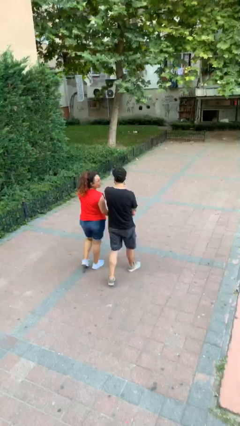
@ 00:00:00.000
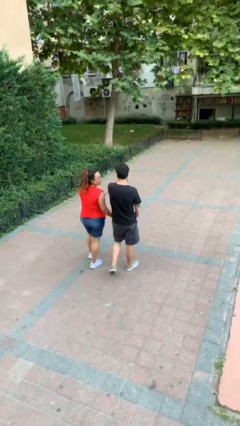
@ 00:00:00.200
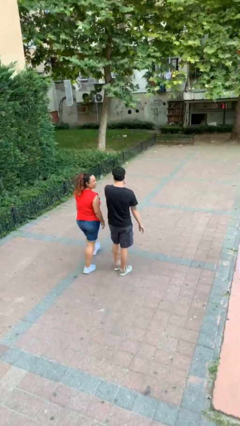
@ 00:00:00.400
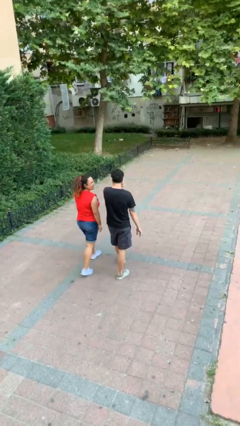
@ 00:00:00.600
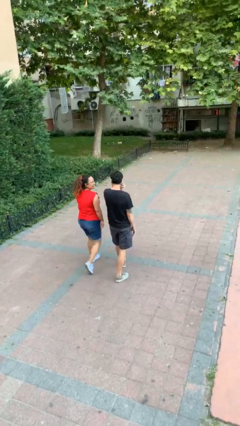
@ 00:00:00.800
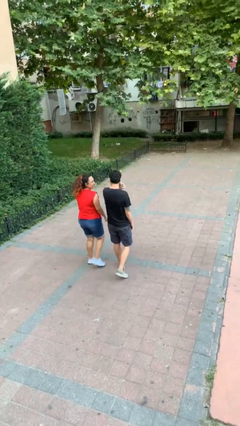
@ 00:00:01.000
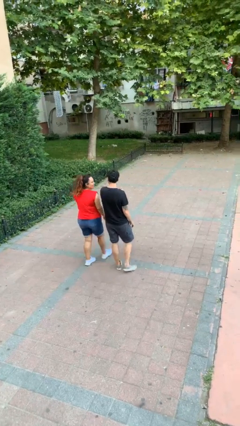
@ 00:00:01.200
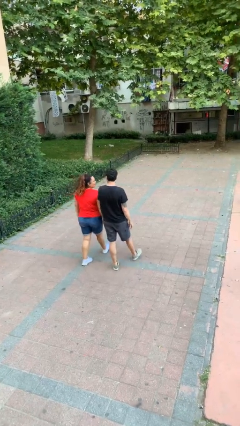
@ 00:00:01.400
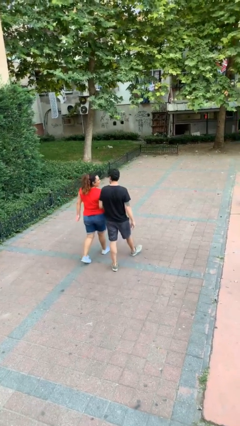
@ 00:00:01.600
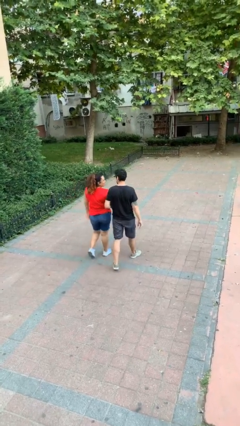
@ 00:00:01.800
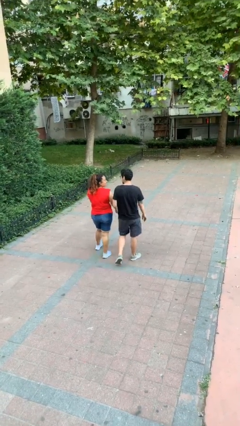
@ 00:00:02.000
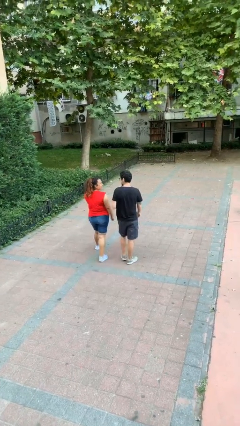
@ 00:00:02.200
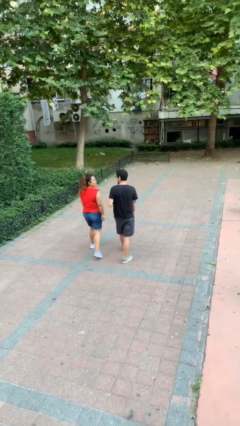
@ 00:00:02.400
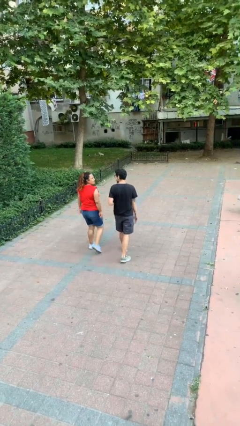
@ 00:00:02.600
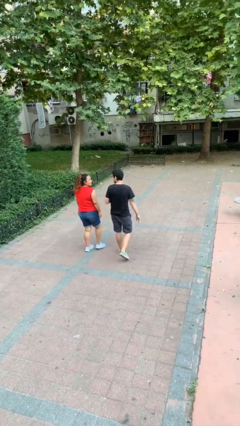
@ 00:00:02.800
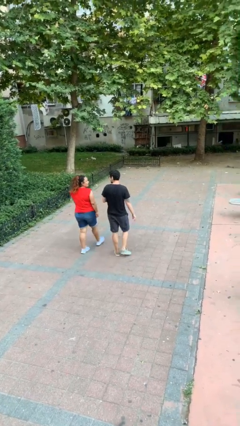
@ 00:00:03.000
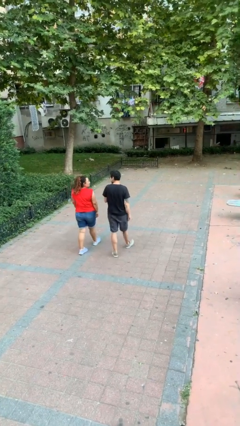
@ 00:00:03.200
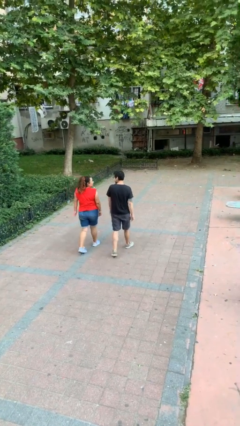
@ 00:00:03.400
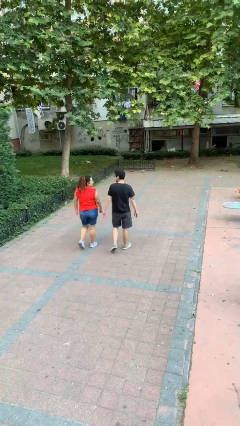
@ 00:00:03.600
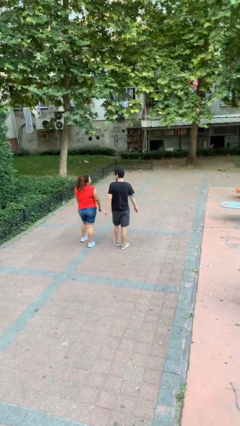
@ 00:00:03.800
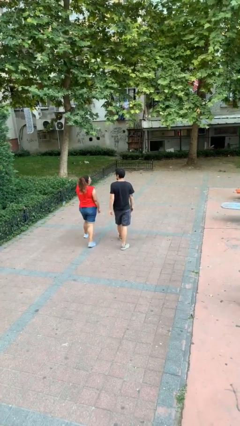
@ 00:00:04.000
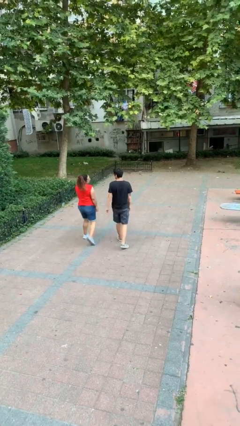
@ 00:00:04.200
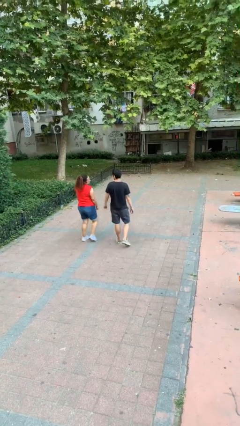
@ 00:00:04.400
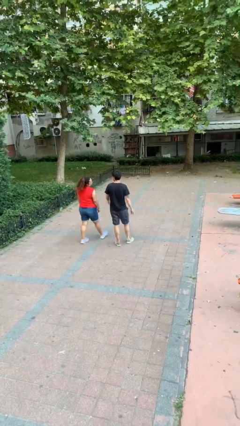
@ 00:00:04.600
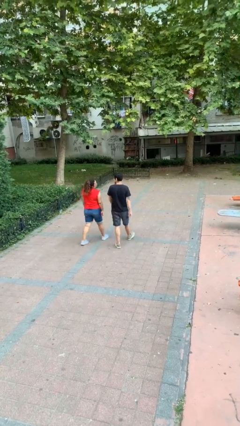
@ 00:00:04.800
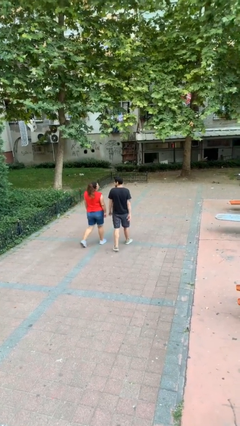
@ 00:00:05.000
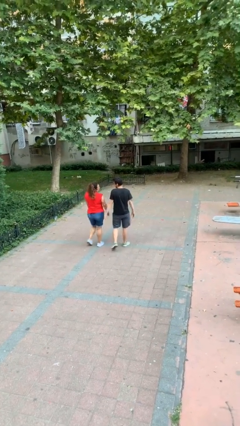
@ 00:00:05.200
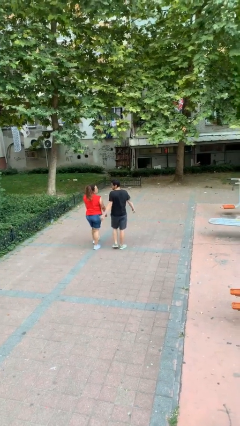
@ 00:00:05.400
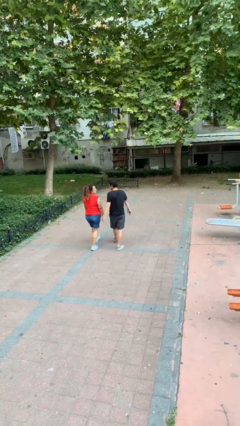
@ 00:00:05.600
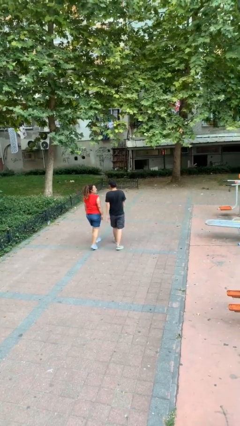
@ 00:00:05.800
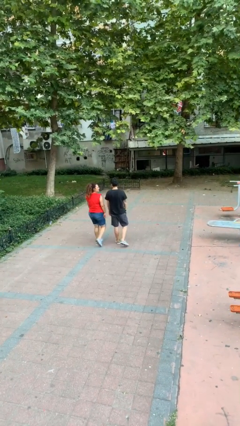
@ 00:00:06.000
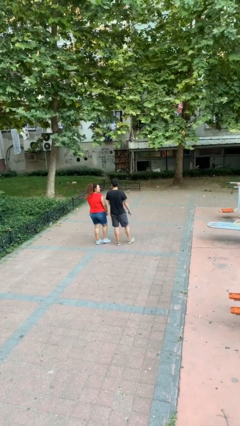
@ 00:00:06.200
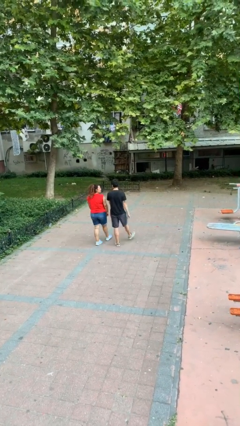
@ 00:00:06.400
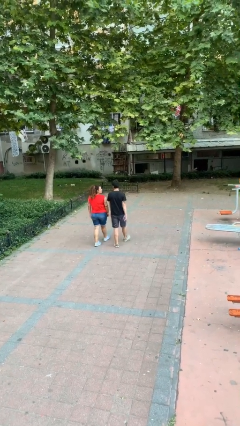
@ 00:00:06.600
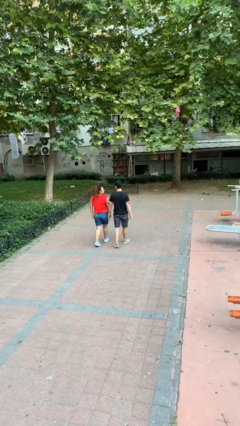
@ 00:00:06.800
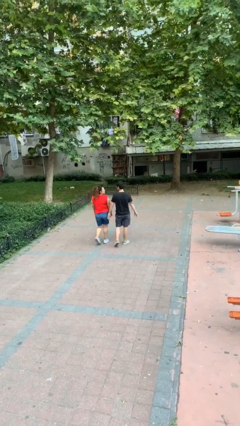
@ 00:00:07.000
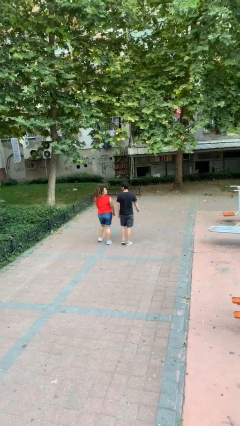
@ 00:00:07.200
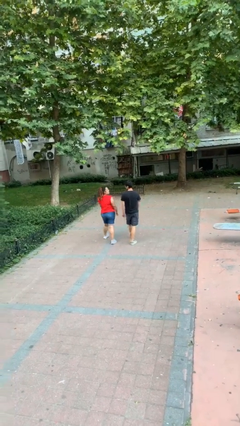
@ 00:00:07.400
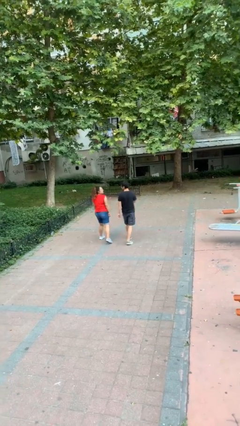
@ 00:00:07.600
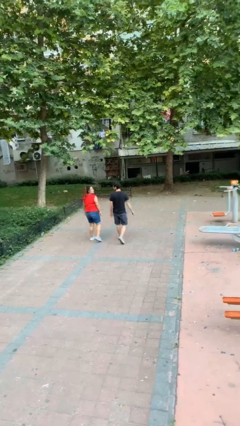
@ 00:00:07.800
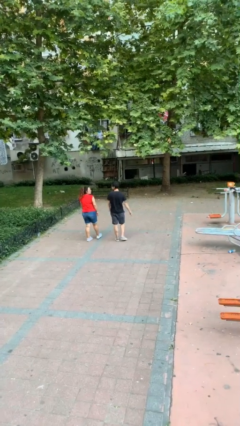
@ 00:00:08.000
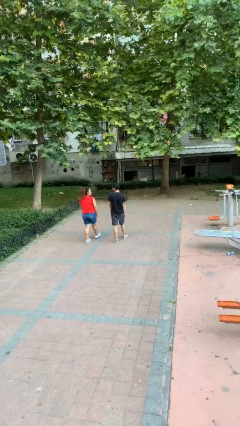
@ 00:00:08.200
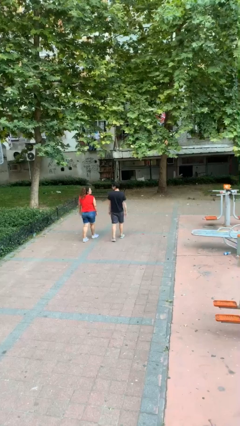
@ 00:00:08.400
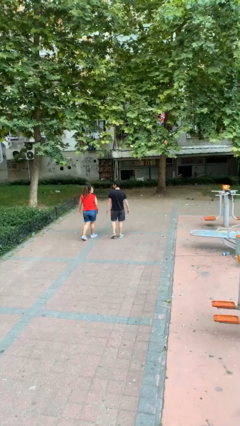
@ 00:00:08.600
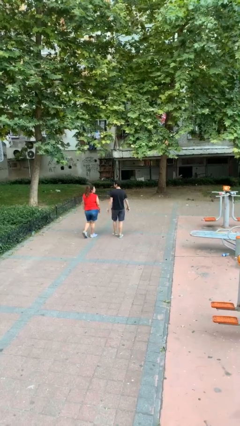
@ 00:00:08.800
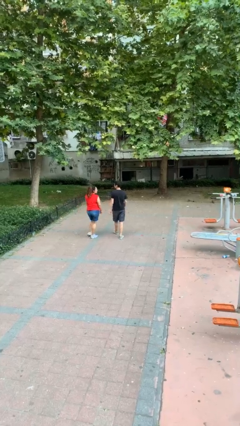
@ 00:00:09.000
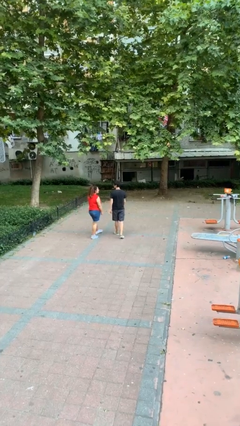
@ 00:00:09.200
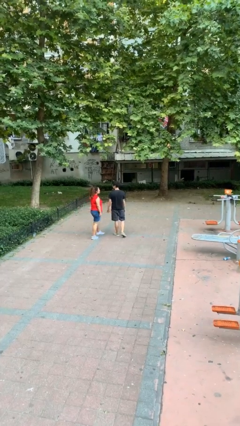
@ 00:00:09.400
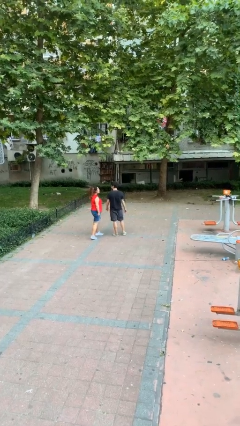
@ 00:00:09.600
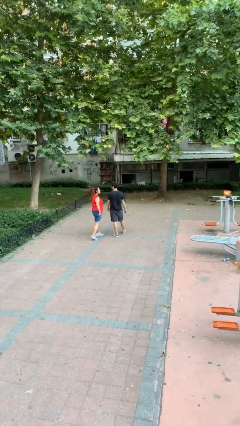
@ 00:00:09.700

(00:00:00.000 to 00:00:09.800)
person talks to person

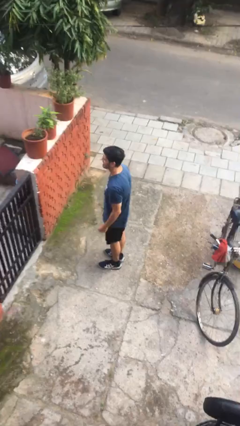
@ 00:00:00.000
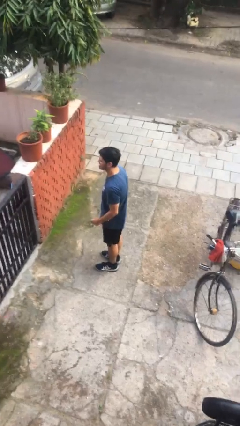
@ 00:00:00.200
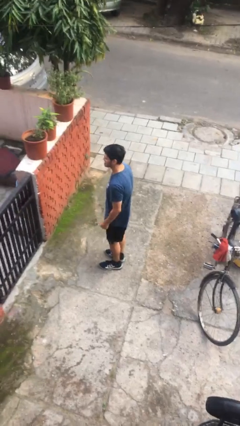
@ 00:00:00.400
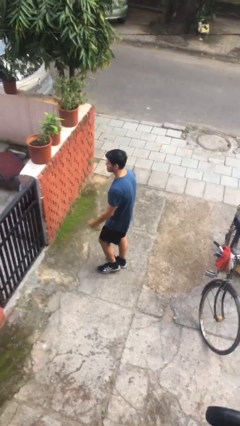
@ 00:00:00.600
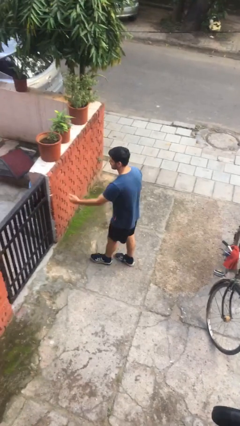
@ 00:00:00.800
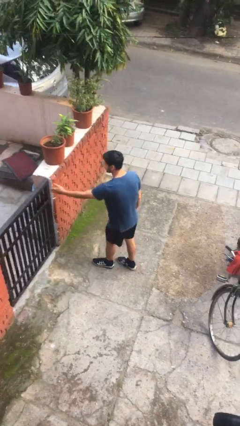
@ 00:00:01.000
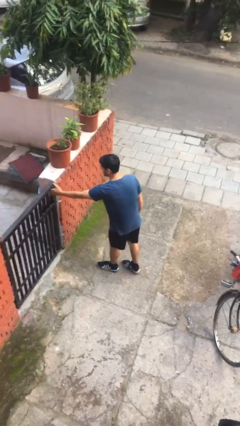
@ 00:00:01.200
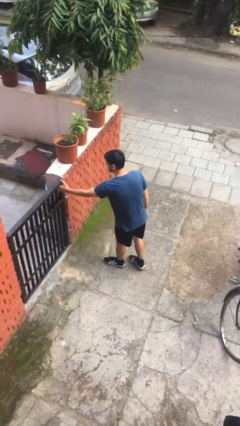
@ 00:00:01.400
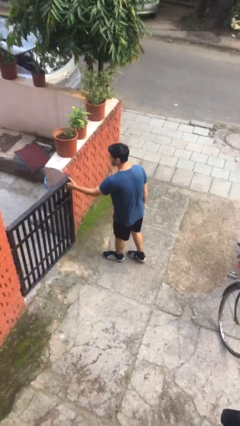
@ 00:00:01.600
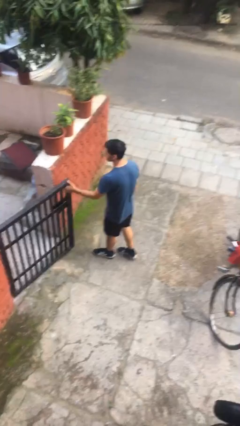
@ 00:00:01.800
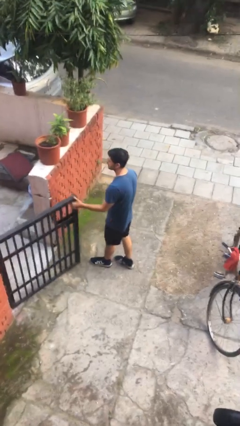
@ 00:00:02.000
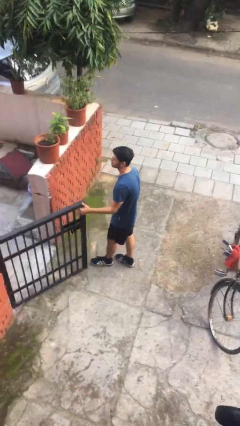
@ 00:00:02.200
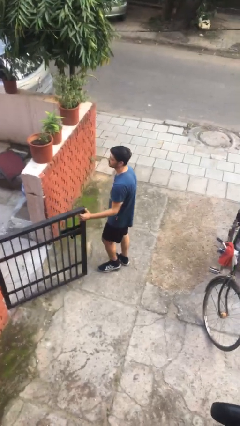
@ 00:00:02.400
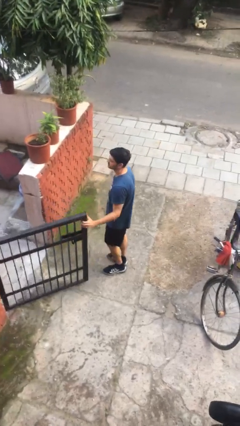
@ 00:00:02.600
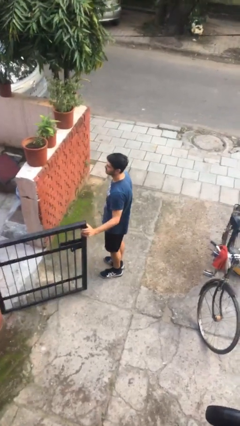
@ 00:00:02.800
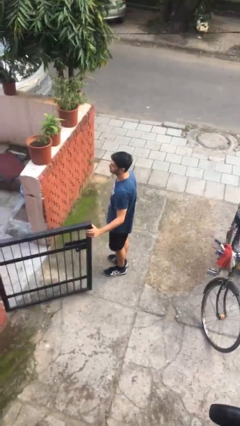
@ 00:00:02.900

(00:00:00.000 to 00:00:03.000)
person opens gate

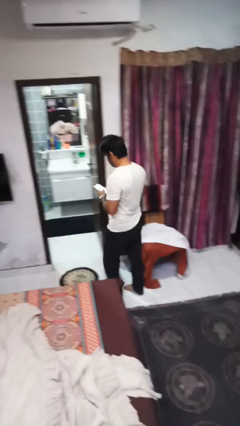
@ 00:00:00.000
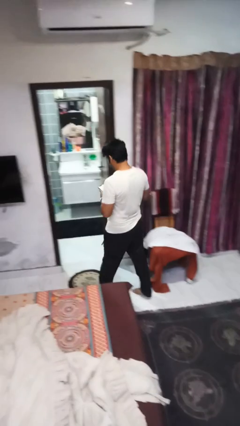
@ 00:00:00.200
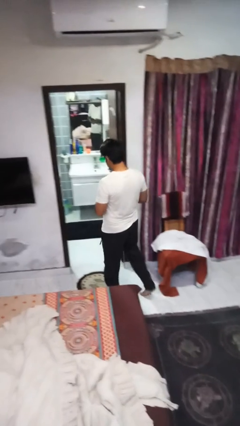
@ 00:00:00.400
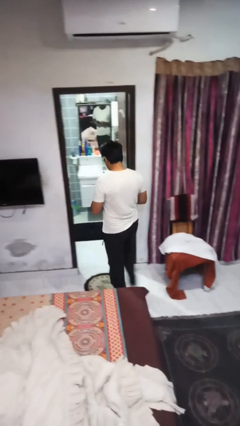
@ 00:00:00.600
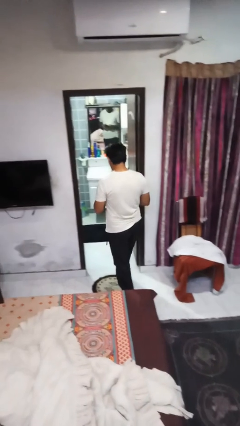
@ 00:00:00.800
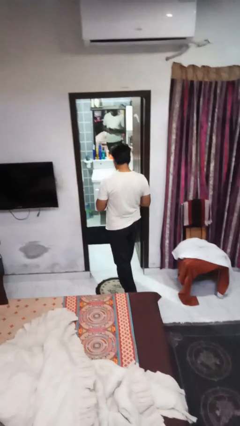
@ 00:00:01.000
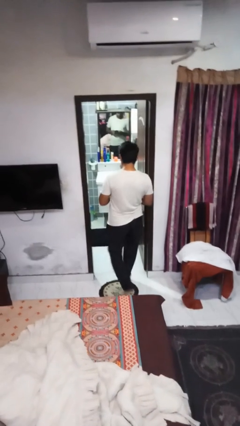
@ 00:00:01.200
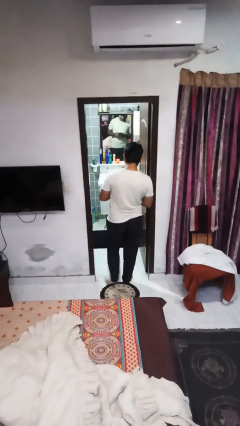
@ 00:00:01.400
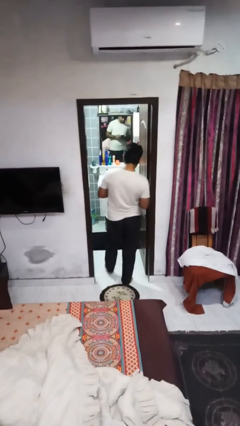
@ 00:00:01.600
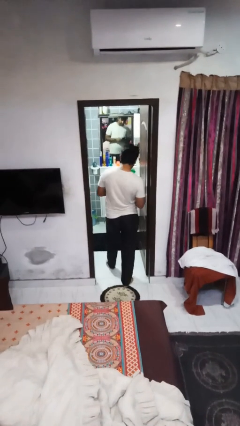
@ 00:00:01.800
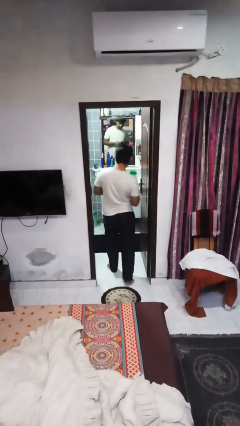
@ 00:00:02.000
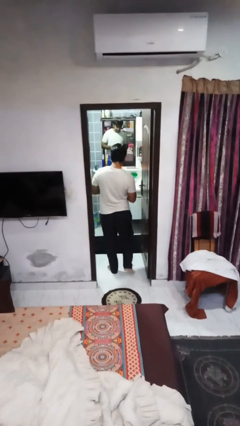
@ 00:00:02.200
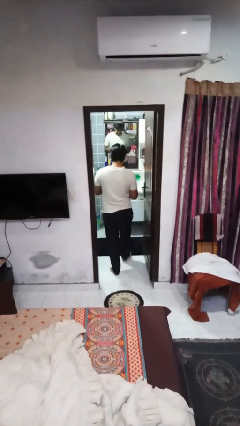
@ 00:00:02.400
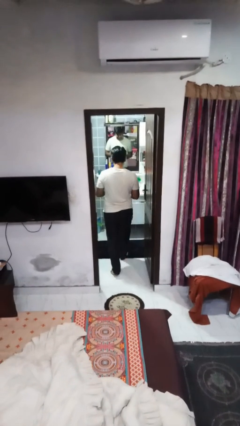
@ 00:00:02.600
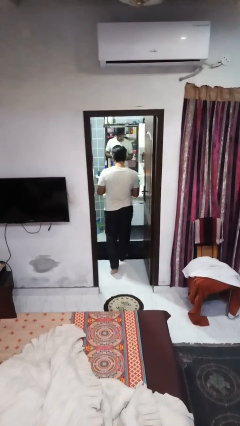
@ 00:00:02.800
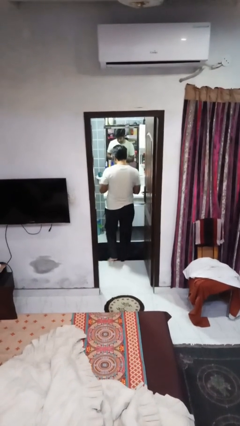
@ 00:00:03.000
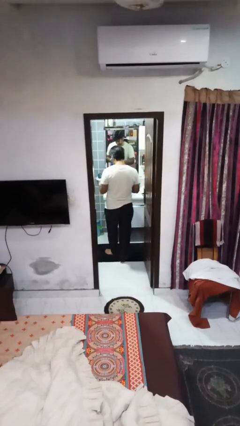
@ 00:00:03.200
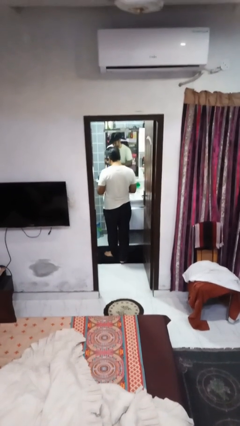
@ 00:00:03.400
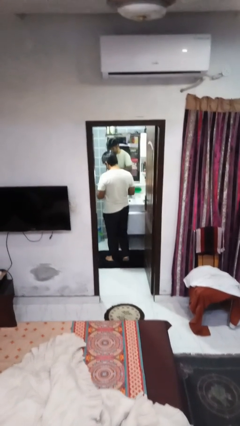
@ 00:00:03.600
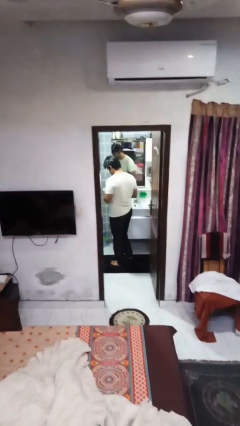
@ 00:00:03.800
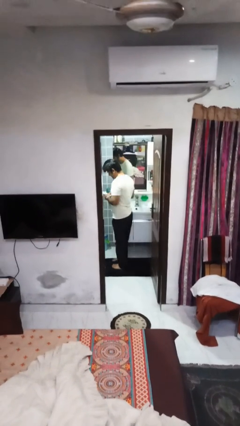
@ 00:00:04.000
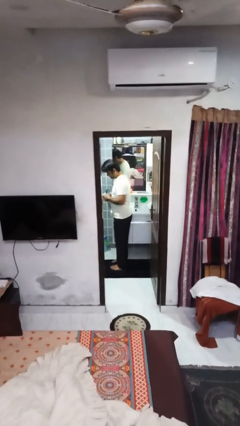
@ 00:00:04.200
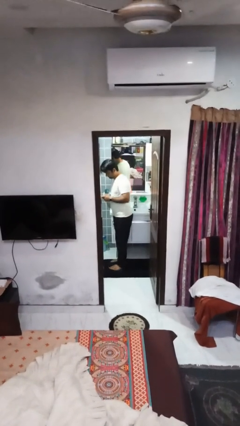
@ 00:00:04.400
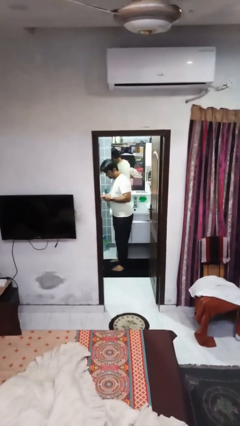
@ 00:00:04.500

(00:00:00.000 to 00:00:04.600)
person exits scene through structure
